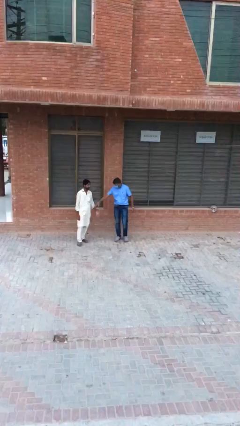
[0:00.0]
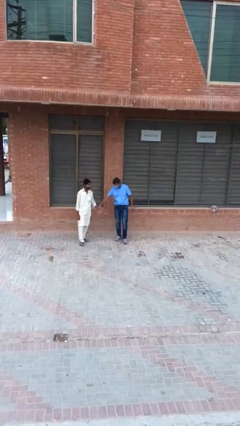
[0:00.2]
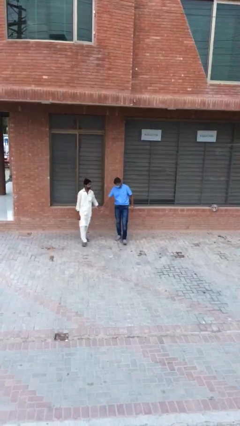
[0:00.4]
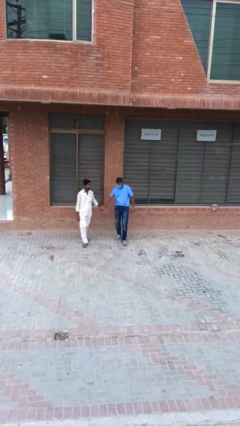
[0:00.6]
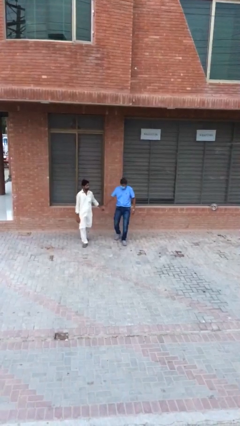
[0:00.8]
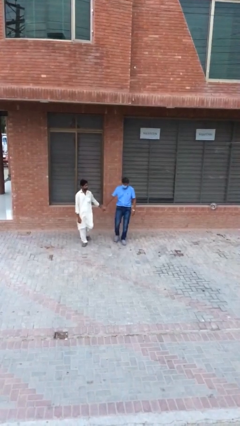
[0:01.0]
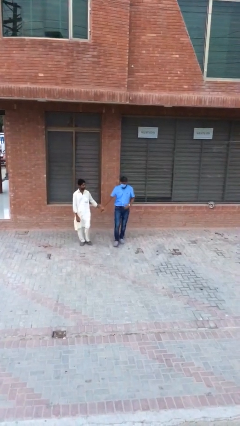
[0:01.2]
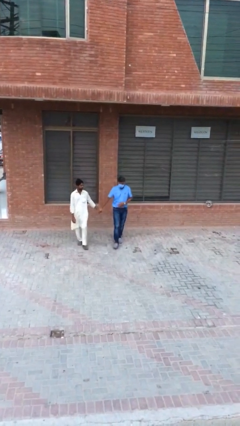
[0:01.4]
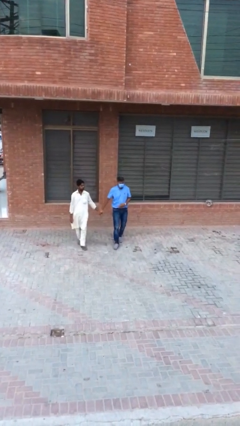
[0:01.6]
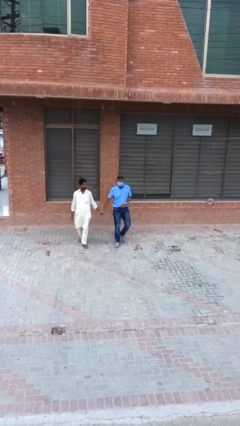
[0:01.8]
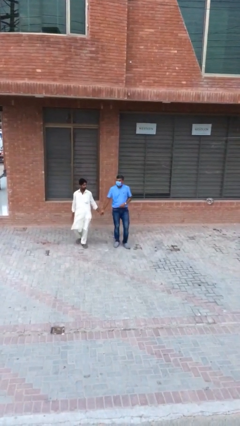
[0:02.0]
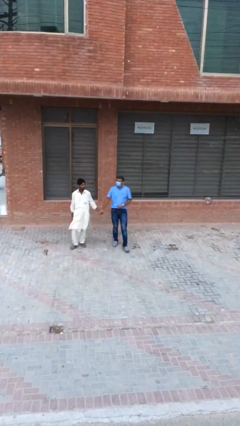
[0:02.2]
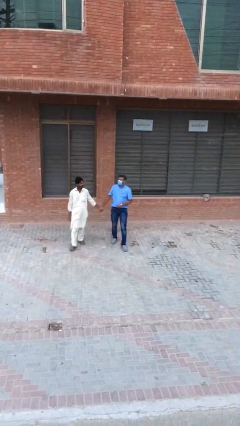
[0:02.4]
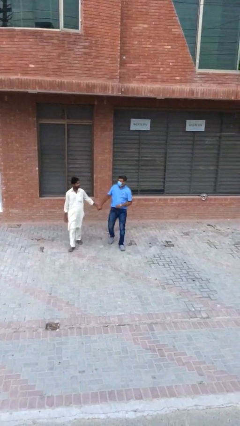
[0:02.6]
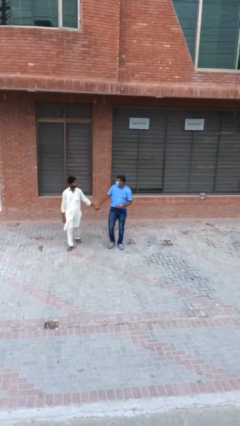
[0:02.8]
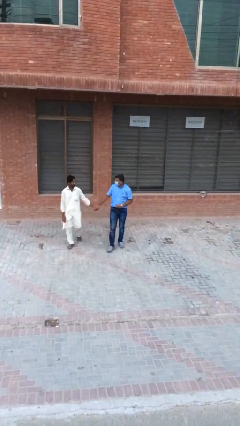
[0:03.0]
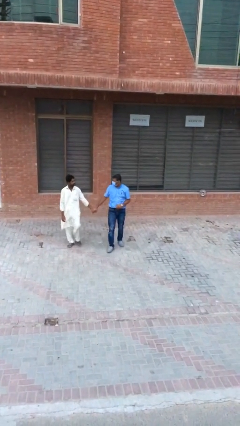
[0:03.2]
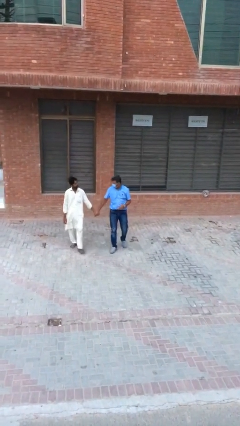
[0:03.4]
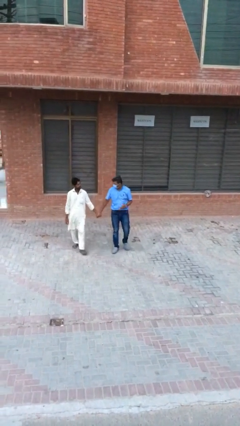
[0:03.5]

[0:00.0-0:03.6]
person holds hand

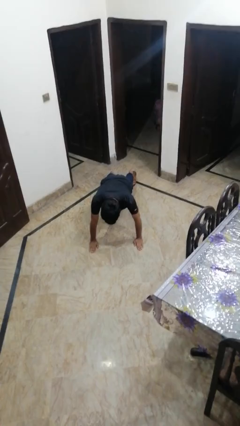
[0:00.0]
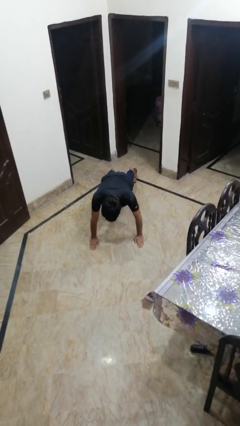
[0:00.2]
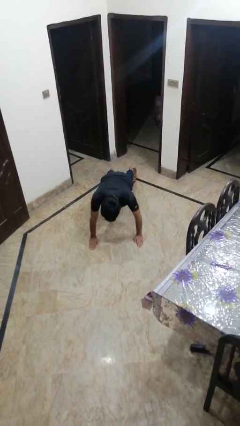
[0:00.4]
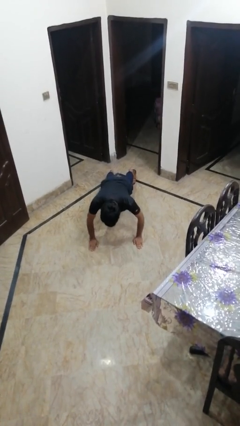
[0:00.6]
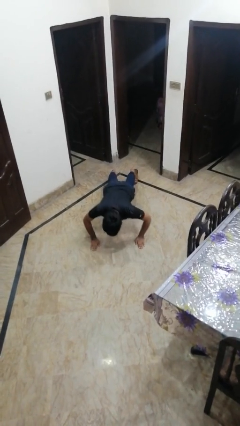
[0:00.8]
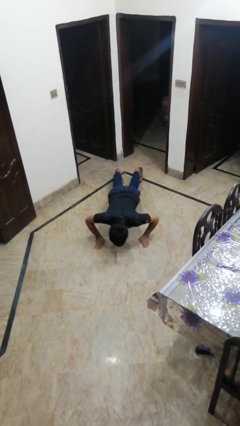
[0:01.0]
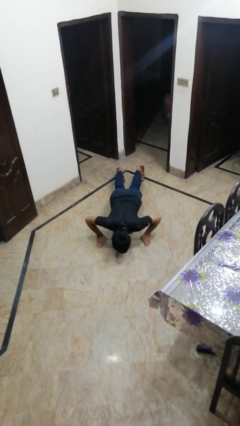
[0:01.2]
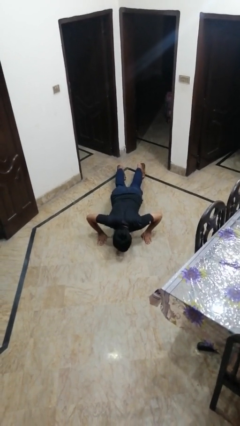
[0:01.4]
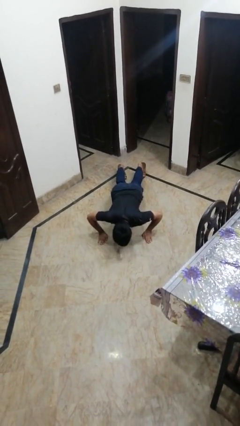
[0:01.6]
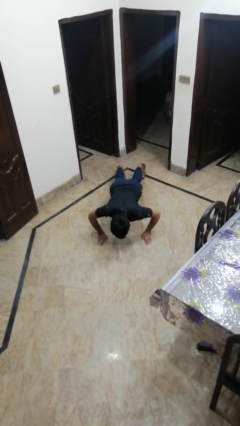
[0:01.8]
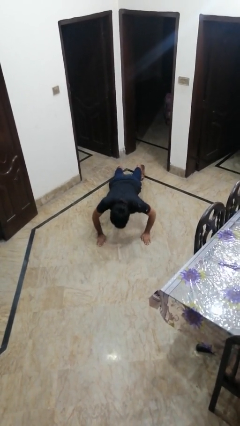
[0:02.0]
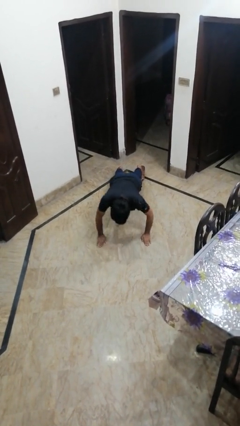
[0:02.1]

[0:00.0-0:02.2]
person exercises with pushup

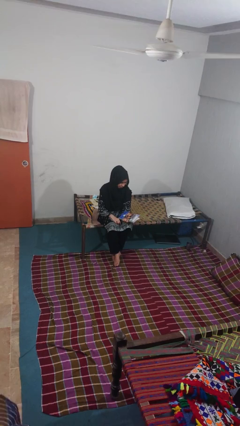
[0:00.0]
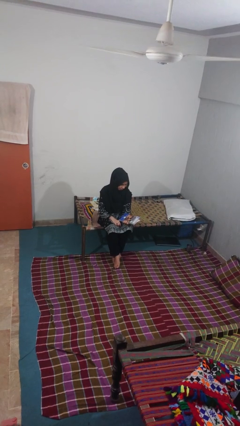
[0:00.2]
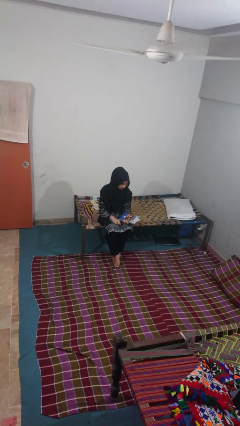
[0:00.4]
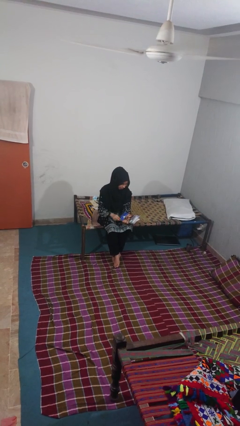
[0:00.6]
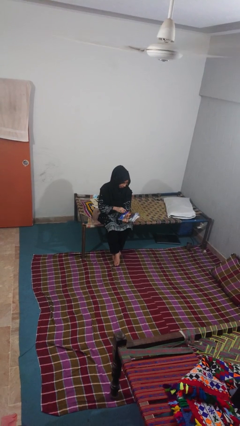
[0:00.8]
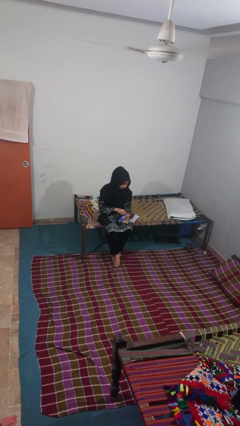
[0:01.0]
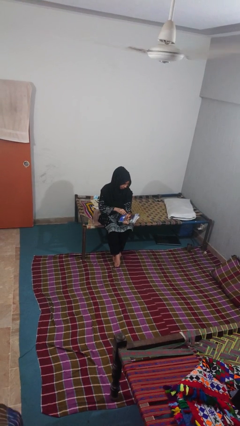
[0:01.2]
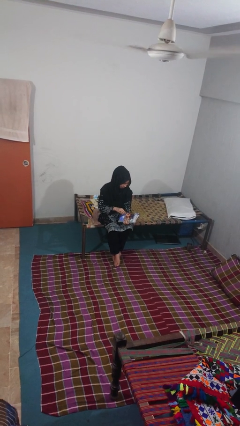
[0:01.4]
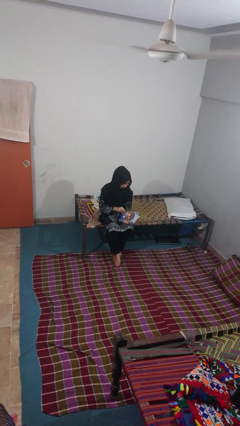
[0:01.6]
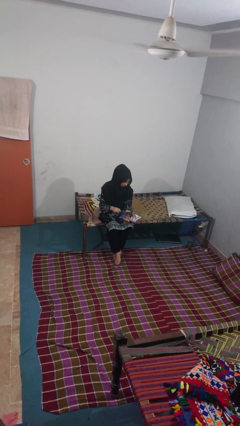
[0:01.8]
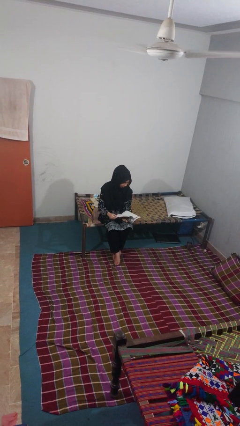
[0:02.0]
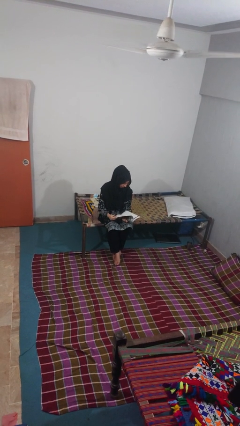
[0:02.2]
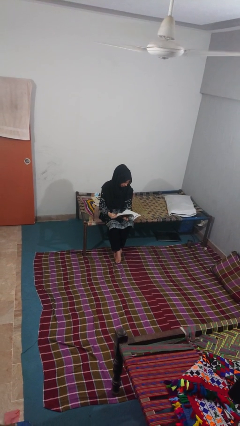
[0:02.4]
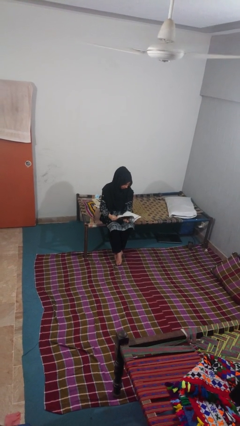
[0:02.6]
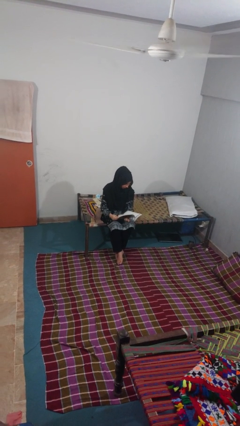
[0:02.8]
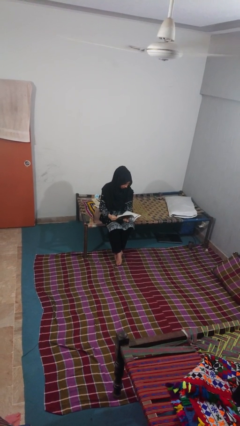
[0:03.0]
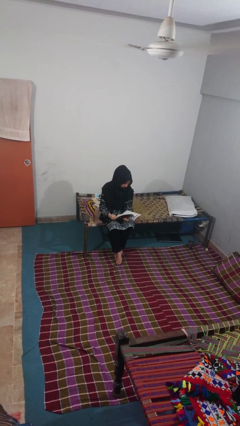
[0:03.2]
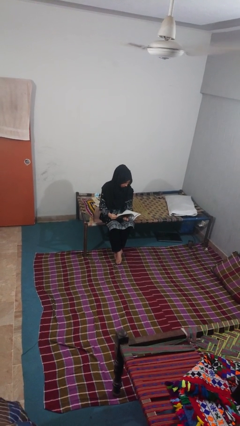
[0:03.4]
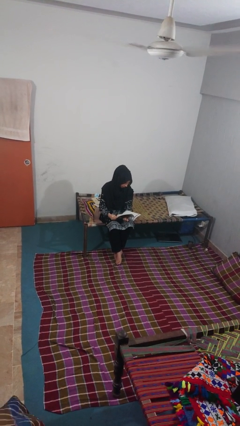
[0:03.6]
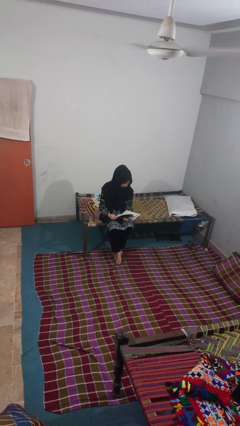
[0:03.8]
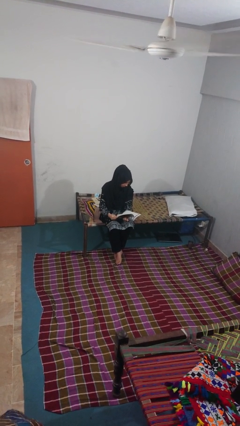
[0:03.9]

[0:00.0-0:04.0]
person reads book

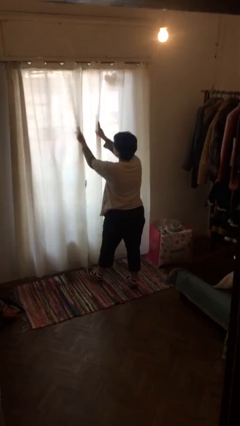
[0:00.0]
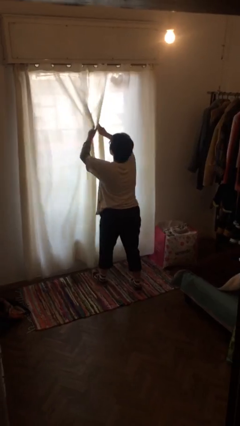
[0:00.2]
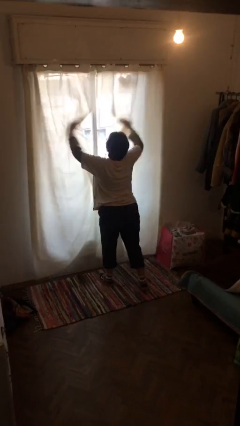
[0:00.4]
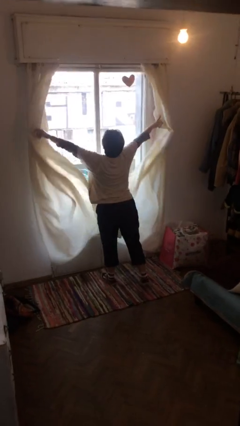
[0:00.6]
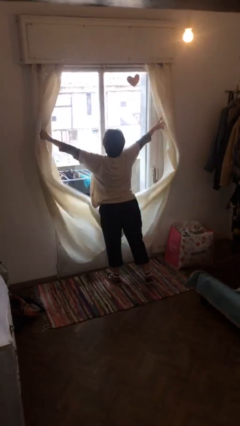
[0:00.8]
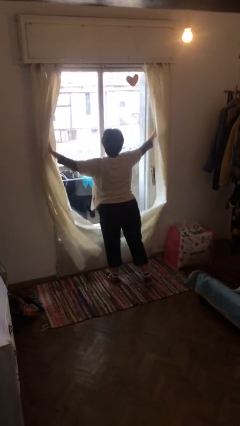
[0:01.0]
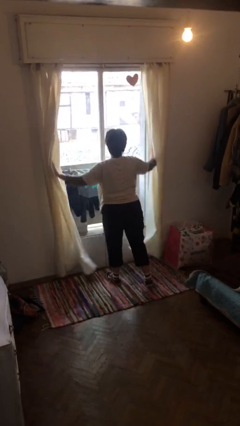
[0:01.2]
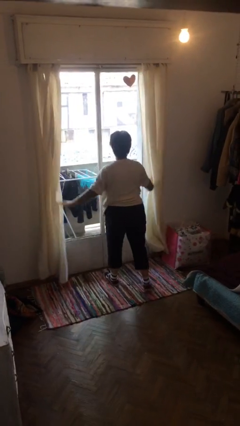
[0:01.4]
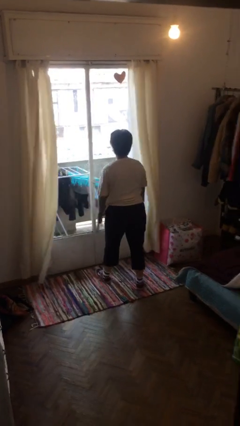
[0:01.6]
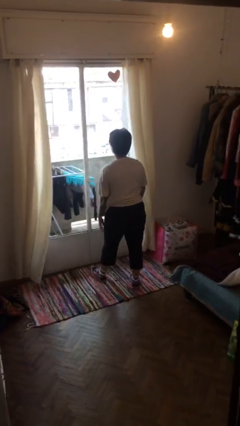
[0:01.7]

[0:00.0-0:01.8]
person opens curtains

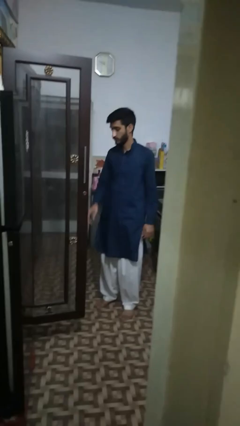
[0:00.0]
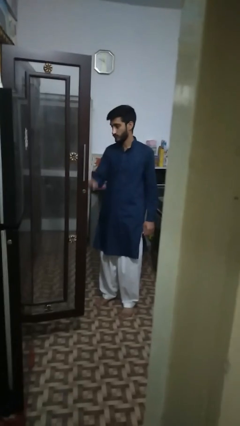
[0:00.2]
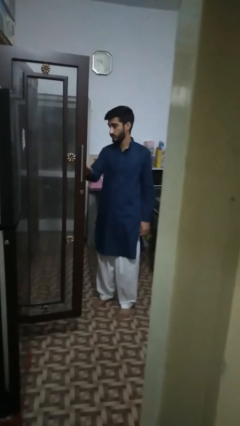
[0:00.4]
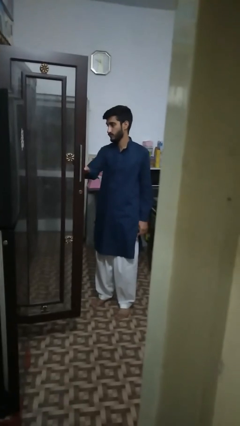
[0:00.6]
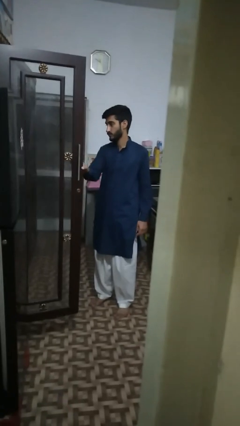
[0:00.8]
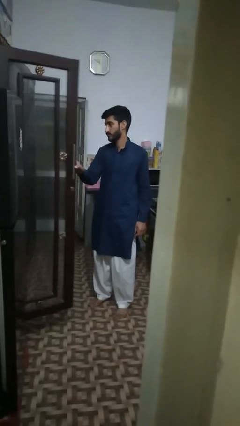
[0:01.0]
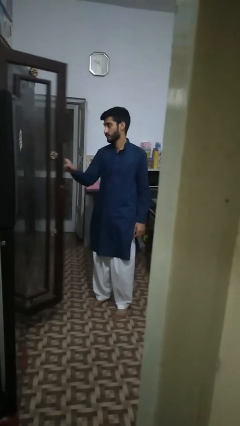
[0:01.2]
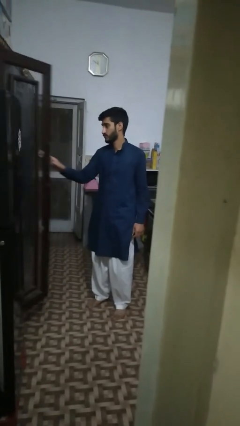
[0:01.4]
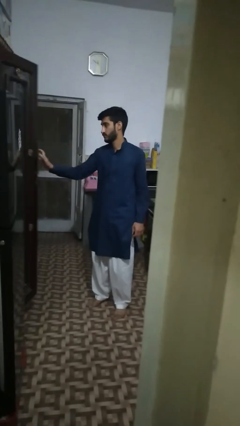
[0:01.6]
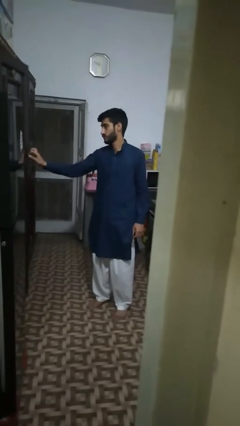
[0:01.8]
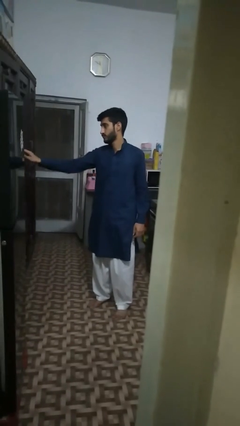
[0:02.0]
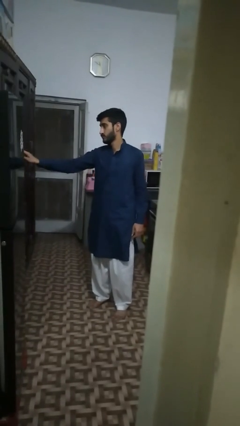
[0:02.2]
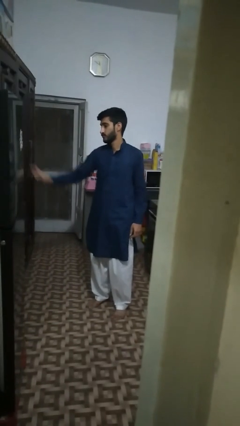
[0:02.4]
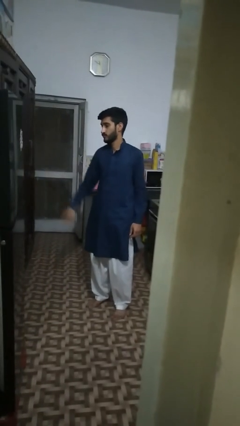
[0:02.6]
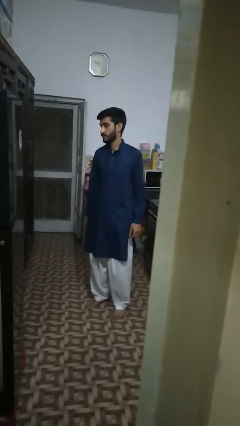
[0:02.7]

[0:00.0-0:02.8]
person closes cabinet

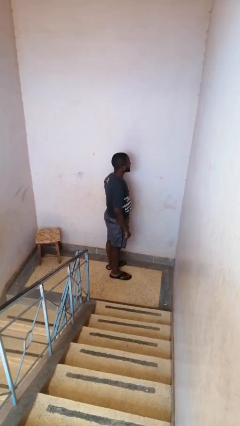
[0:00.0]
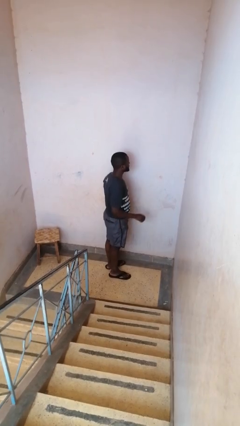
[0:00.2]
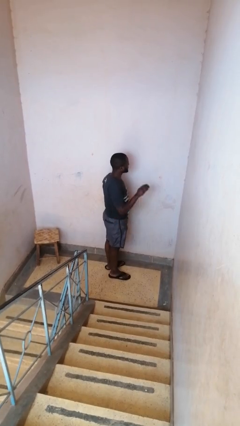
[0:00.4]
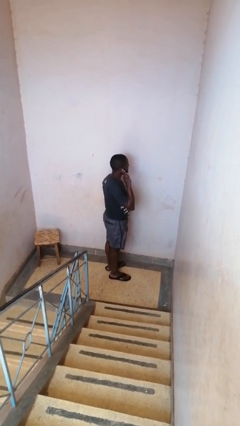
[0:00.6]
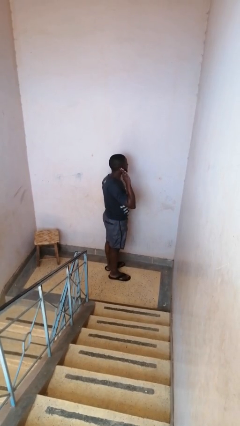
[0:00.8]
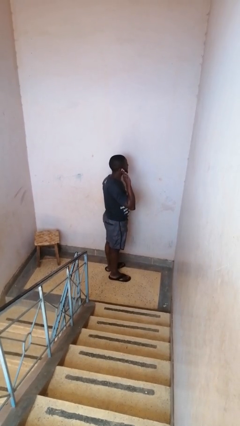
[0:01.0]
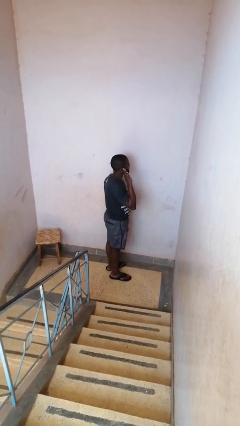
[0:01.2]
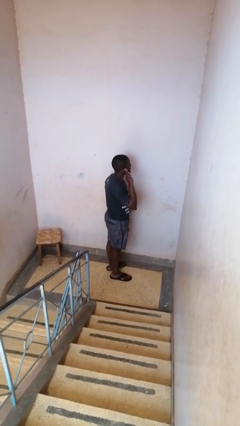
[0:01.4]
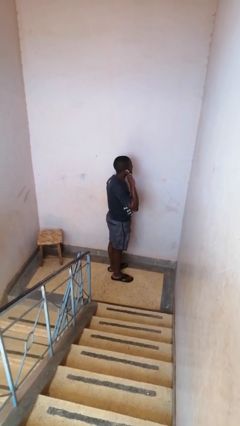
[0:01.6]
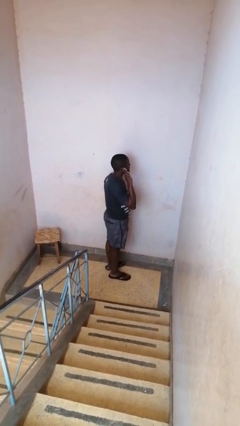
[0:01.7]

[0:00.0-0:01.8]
person salutes

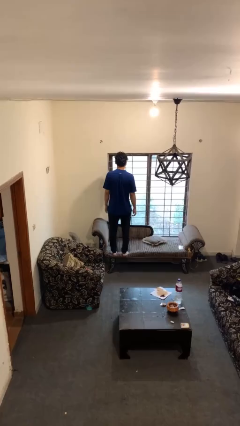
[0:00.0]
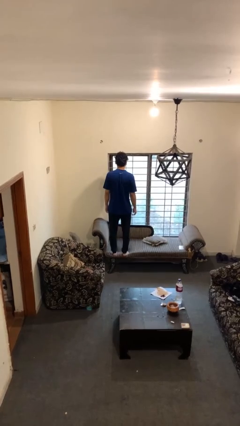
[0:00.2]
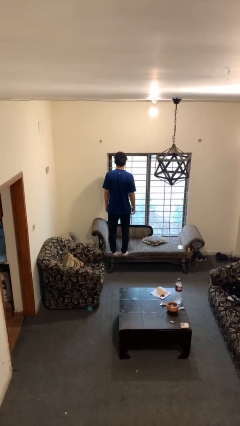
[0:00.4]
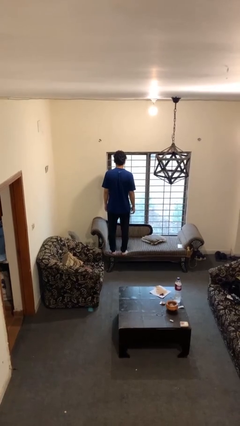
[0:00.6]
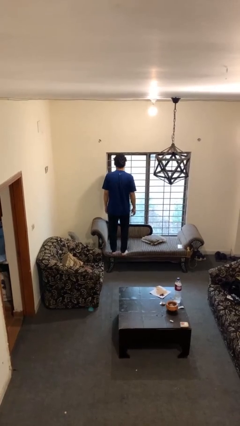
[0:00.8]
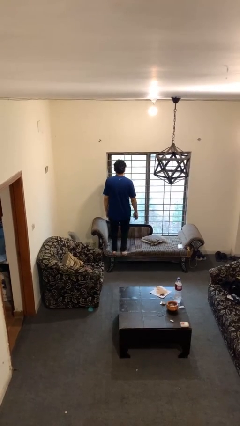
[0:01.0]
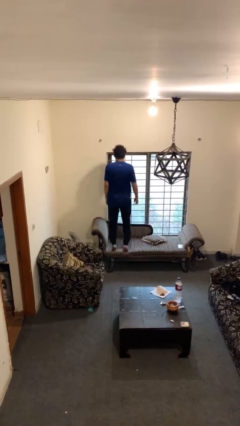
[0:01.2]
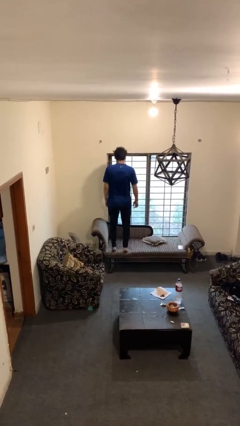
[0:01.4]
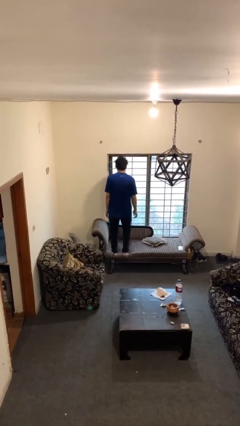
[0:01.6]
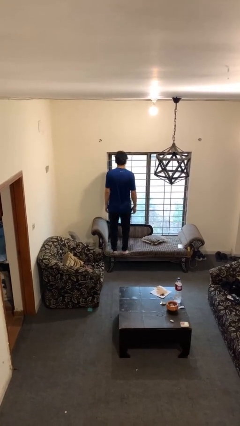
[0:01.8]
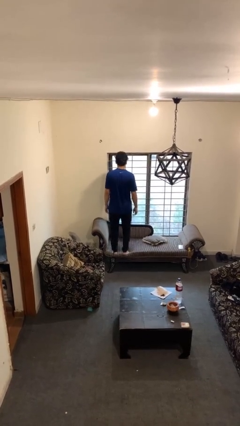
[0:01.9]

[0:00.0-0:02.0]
person jumps on couch
